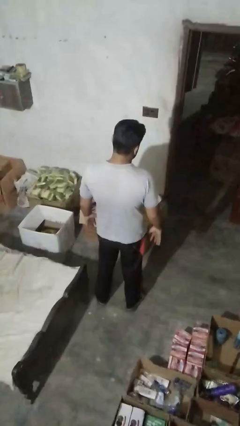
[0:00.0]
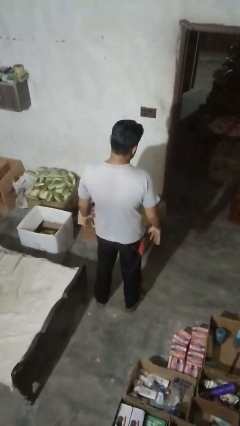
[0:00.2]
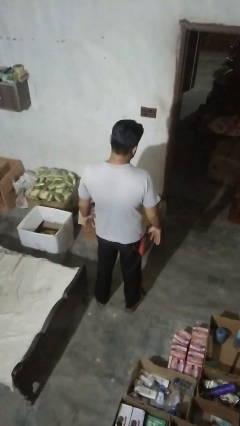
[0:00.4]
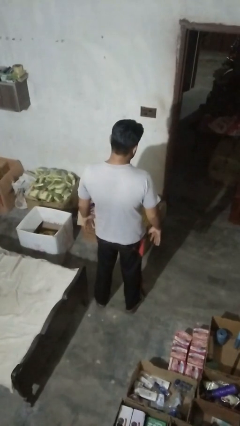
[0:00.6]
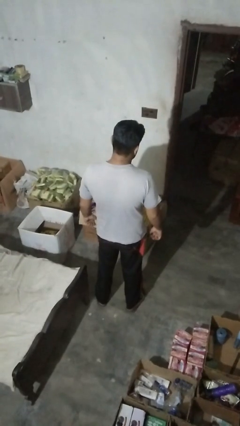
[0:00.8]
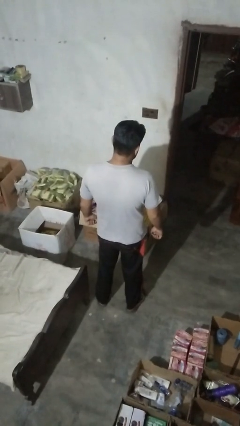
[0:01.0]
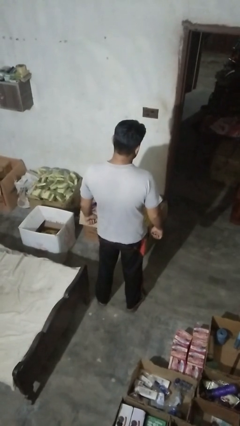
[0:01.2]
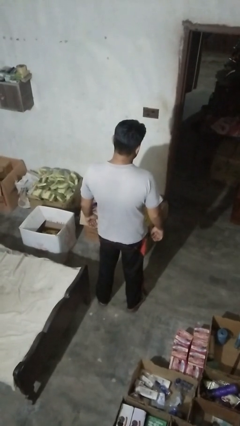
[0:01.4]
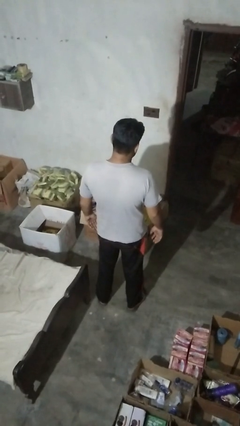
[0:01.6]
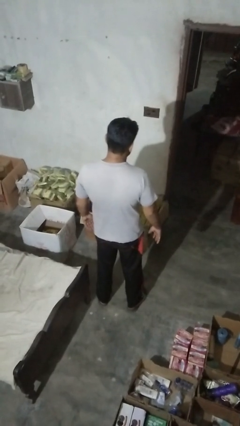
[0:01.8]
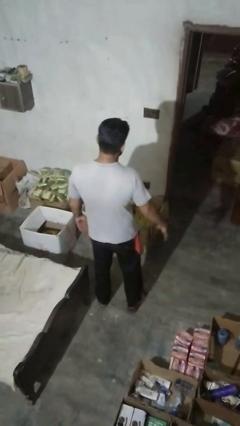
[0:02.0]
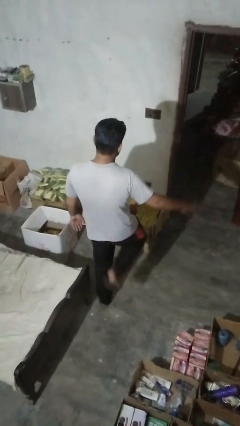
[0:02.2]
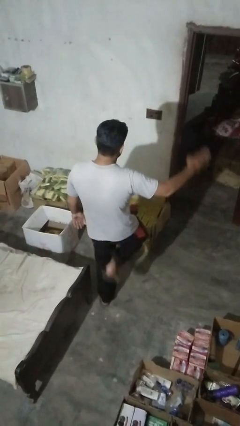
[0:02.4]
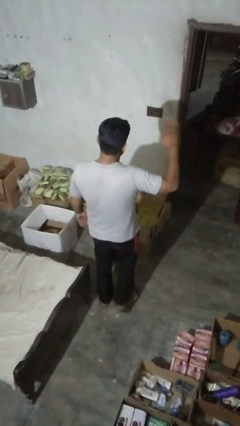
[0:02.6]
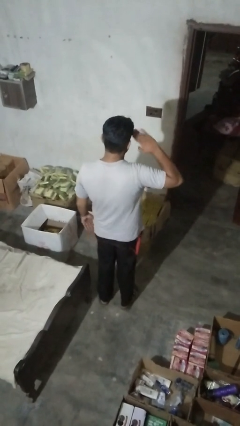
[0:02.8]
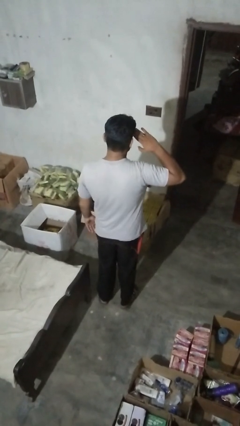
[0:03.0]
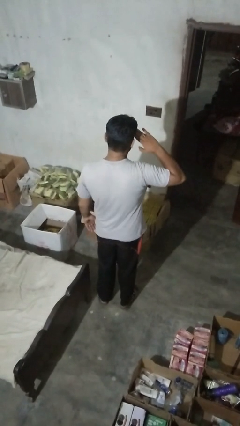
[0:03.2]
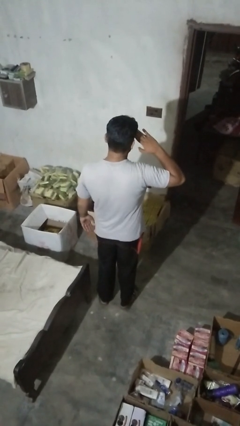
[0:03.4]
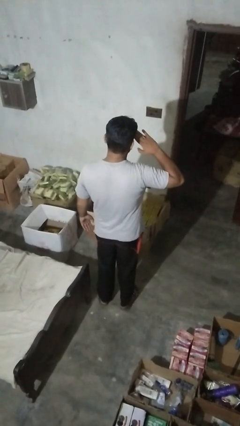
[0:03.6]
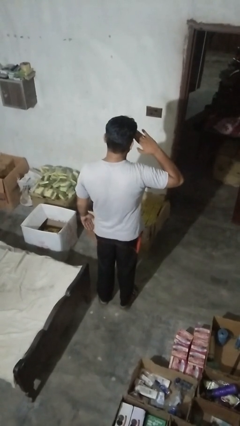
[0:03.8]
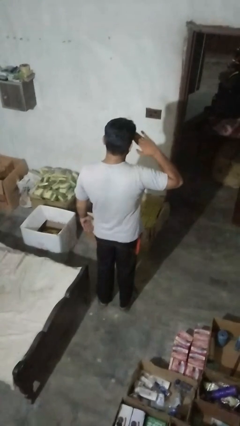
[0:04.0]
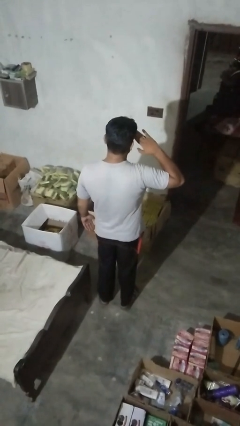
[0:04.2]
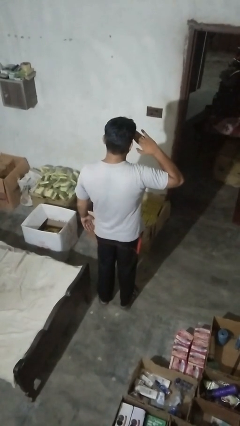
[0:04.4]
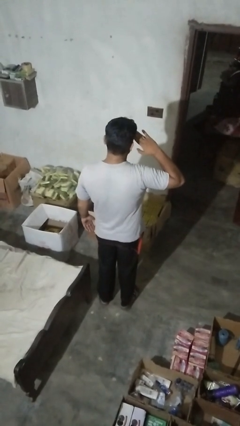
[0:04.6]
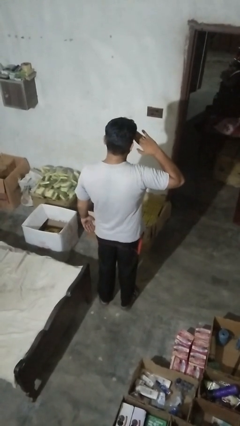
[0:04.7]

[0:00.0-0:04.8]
person salutes

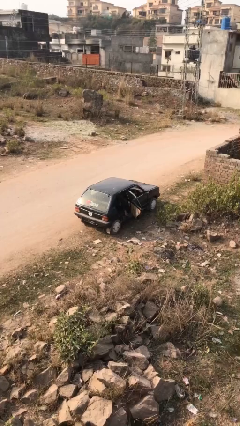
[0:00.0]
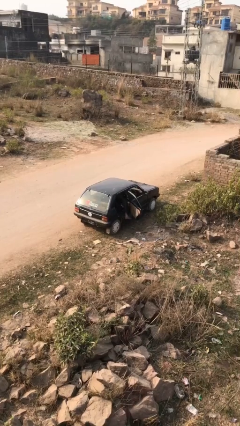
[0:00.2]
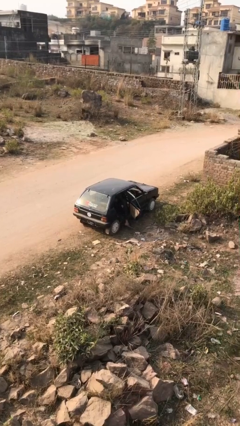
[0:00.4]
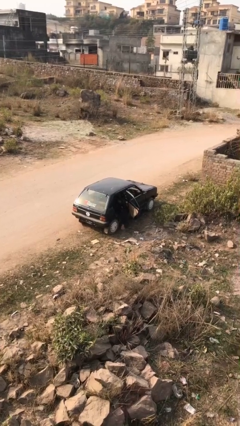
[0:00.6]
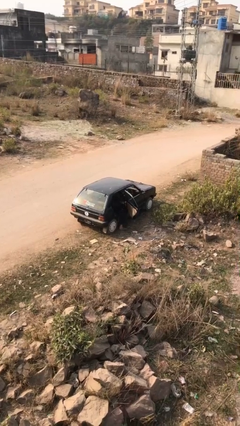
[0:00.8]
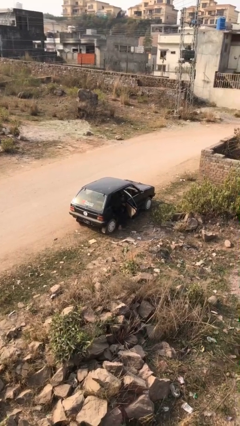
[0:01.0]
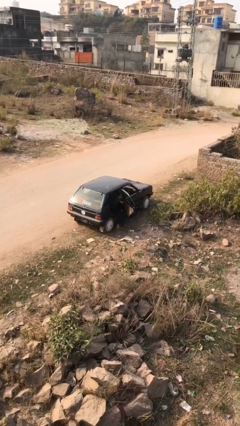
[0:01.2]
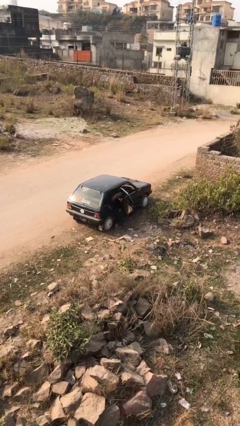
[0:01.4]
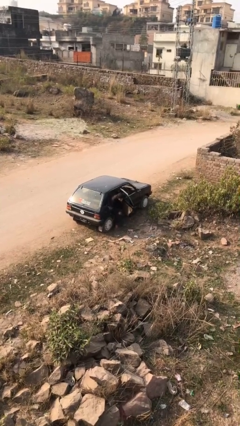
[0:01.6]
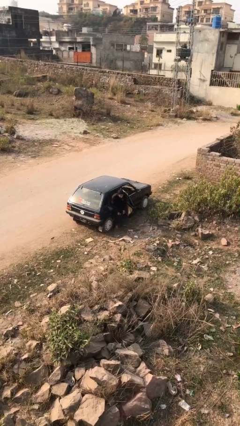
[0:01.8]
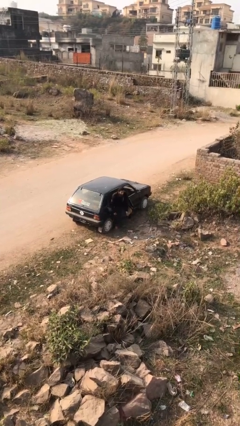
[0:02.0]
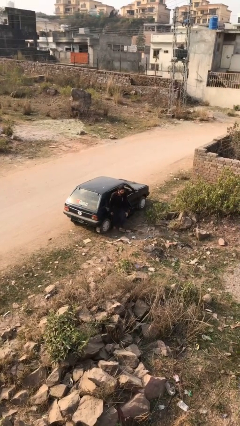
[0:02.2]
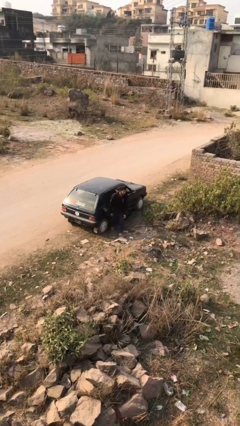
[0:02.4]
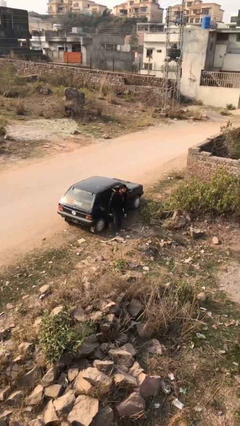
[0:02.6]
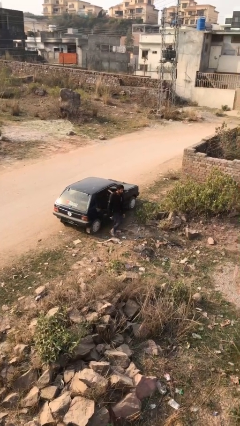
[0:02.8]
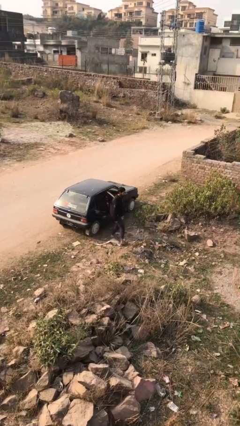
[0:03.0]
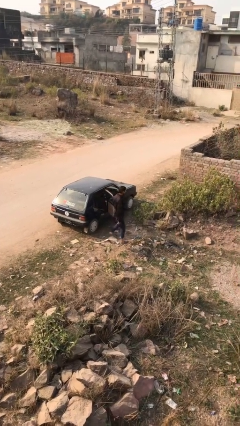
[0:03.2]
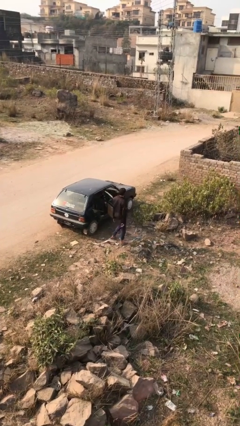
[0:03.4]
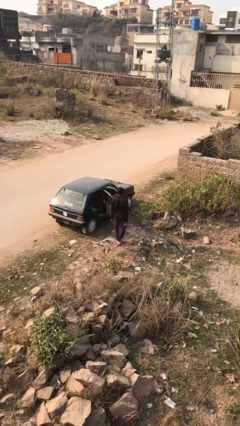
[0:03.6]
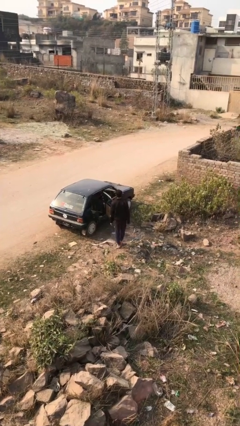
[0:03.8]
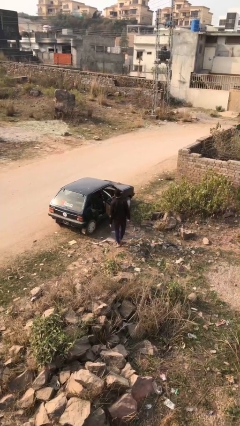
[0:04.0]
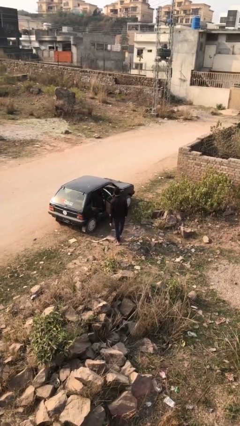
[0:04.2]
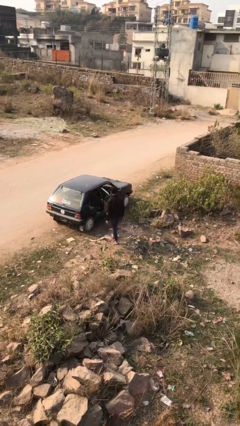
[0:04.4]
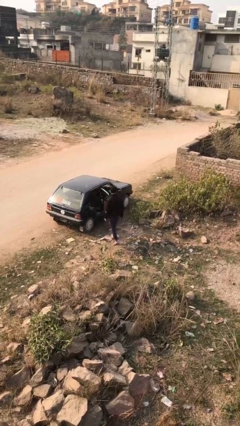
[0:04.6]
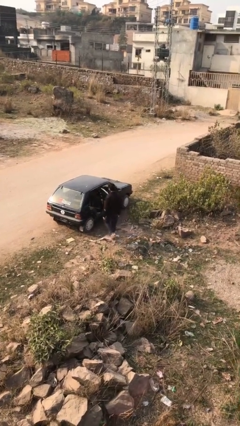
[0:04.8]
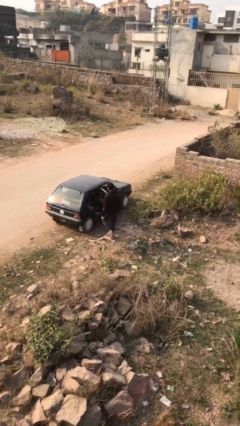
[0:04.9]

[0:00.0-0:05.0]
person exits car

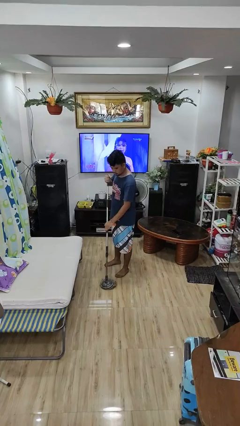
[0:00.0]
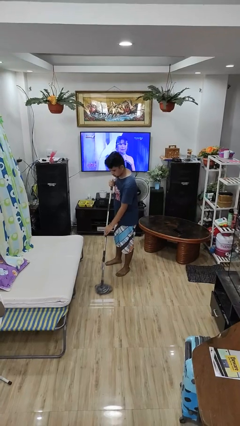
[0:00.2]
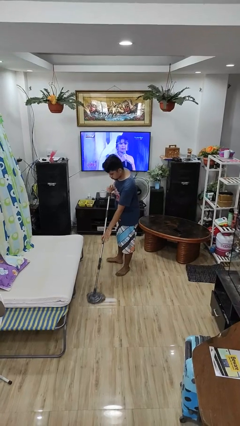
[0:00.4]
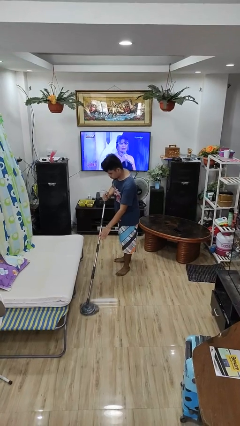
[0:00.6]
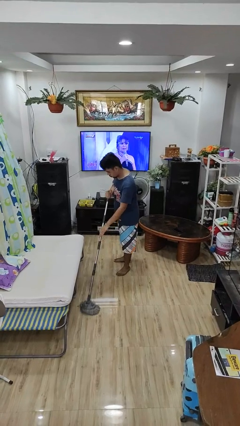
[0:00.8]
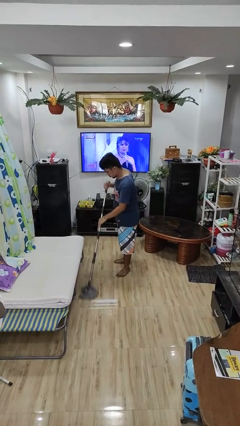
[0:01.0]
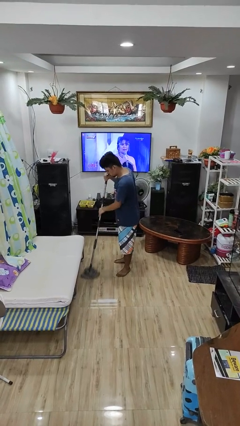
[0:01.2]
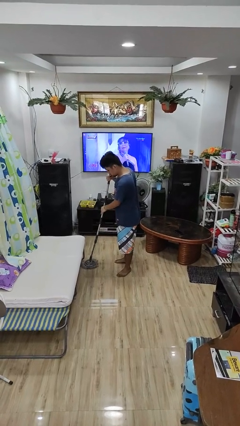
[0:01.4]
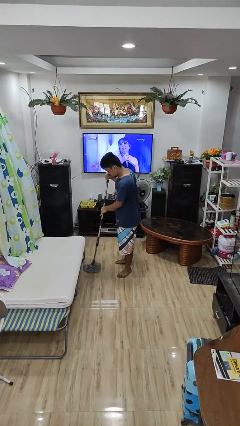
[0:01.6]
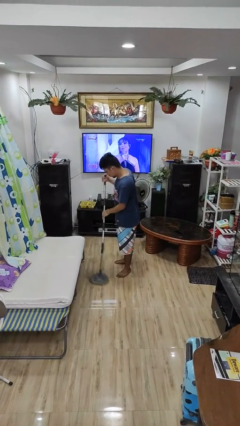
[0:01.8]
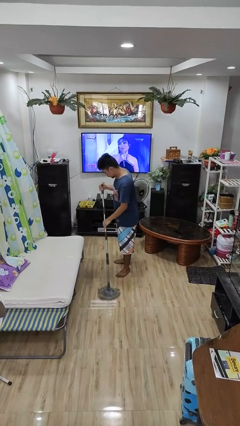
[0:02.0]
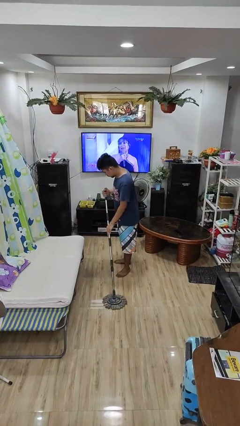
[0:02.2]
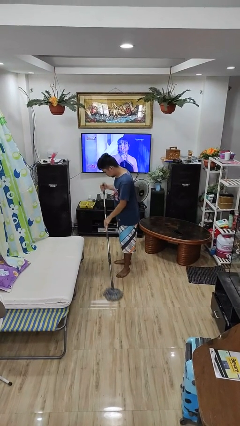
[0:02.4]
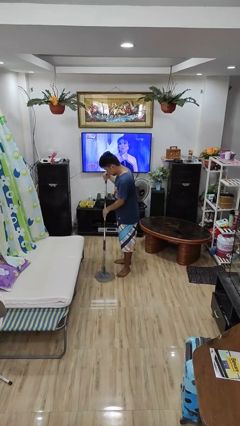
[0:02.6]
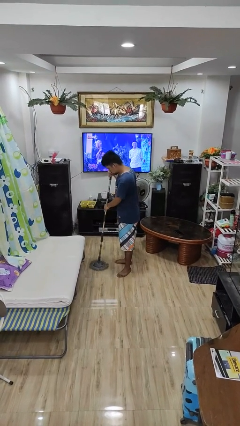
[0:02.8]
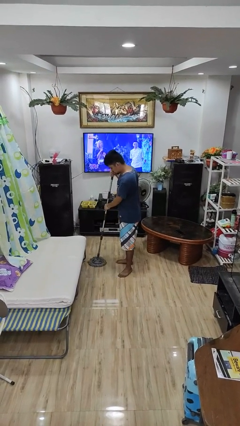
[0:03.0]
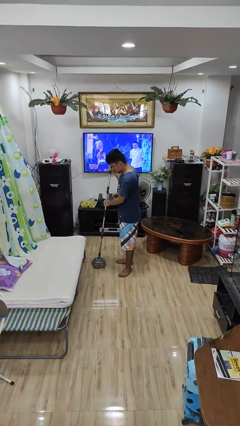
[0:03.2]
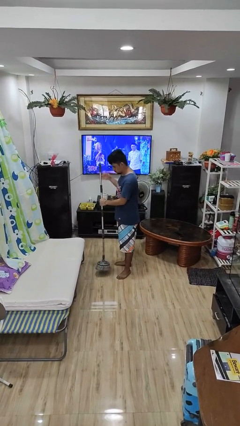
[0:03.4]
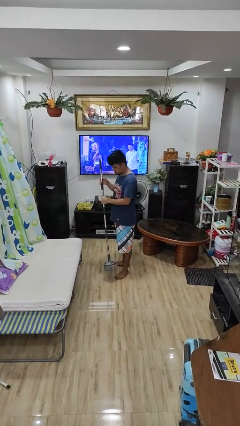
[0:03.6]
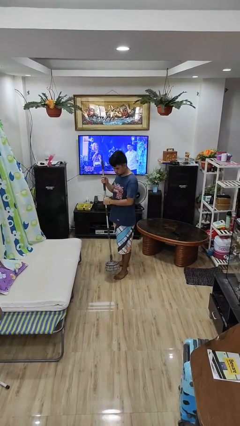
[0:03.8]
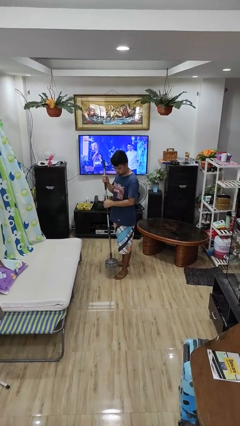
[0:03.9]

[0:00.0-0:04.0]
person mops

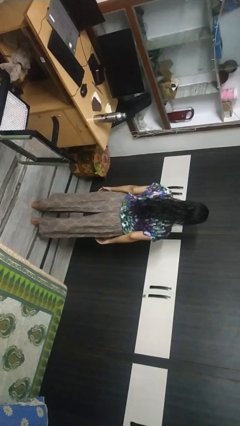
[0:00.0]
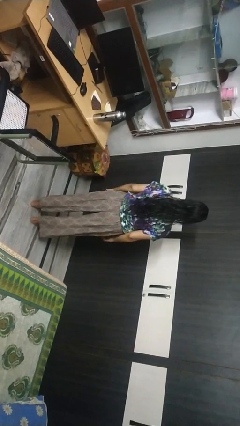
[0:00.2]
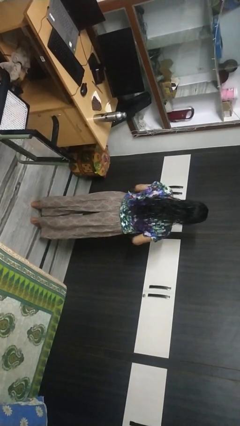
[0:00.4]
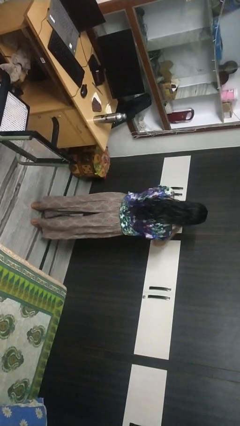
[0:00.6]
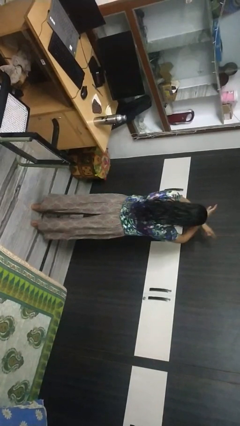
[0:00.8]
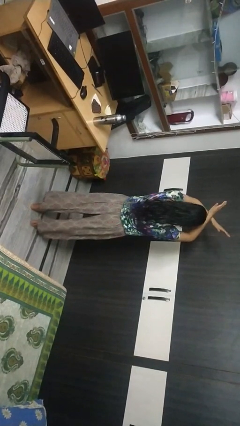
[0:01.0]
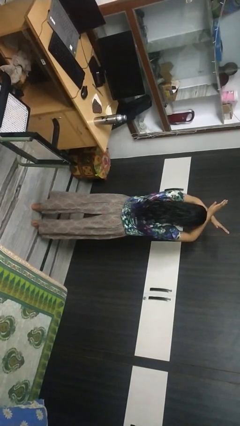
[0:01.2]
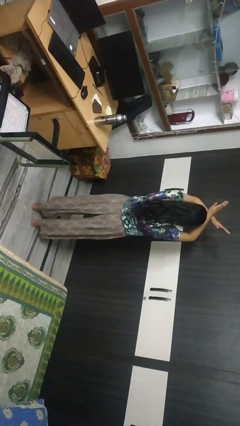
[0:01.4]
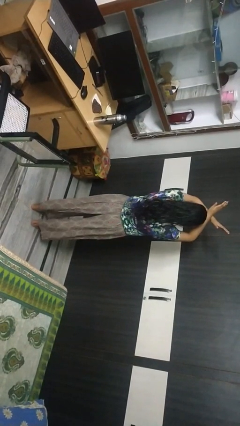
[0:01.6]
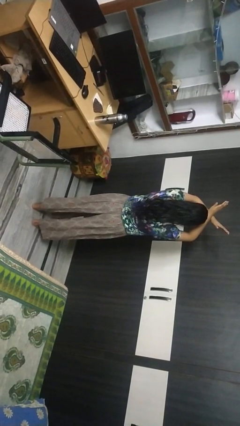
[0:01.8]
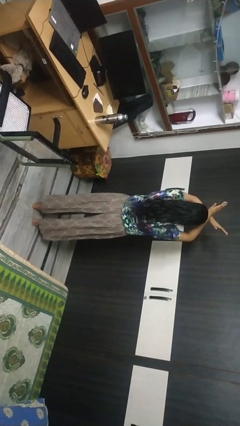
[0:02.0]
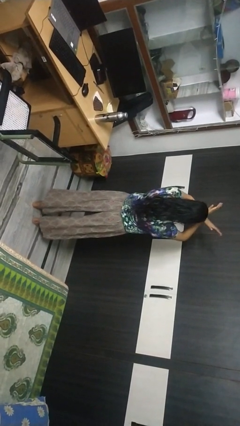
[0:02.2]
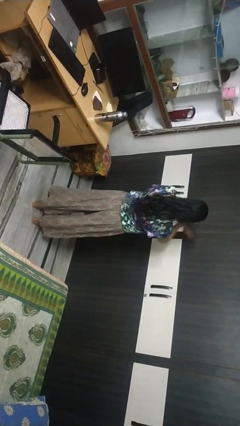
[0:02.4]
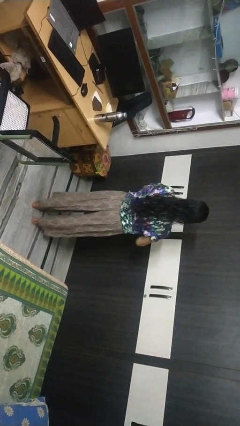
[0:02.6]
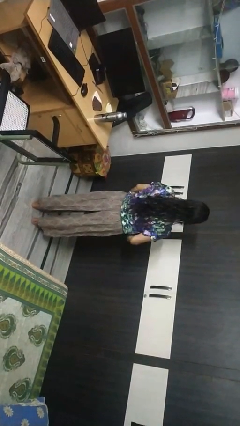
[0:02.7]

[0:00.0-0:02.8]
person gestures arms x

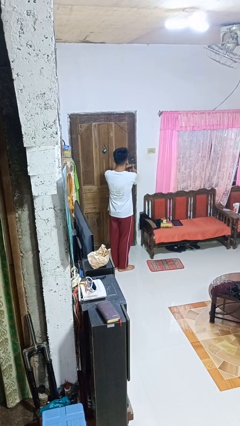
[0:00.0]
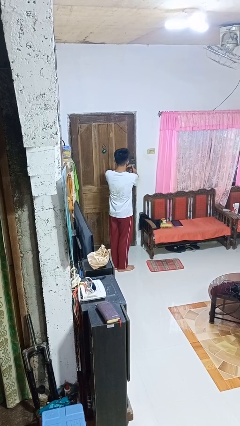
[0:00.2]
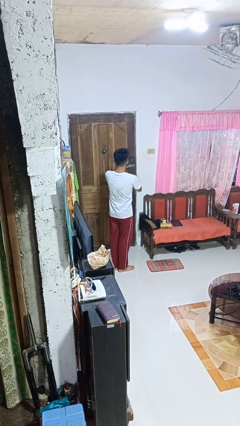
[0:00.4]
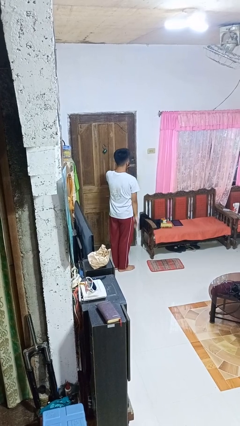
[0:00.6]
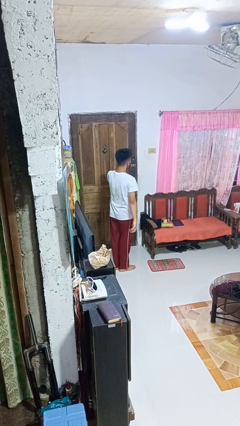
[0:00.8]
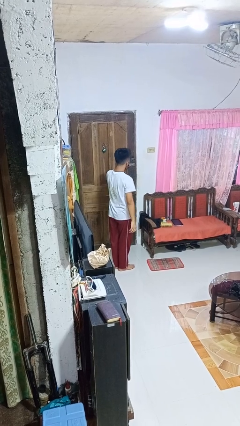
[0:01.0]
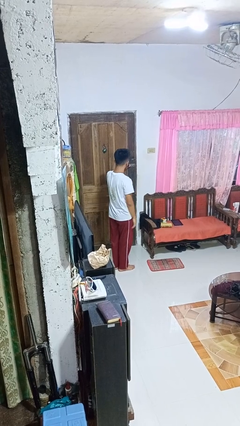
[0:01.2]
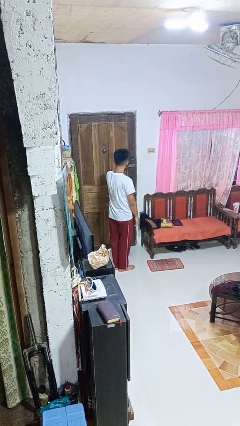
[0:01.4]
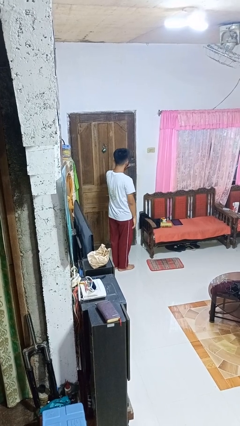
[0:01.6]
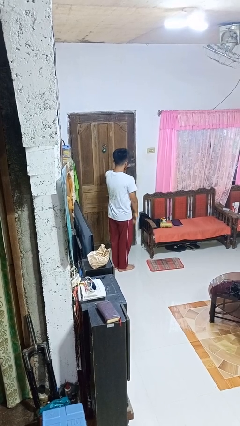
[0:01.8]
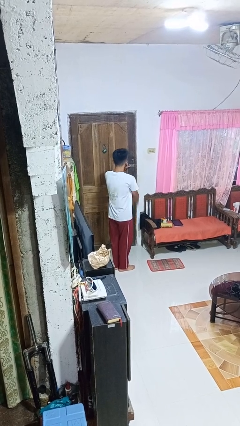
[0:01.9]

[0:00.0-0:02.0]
person unlocks door with keys
